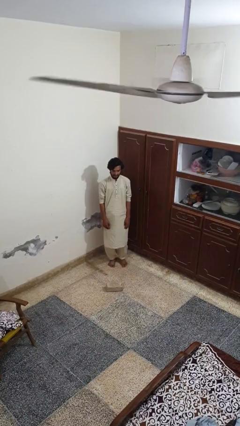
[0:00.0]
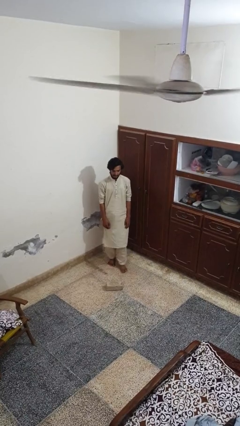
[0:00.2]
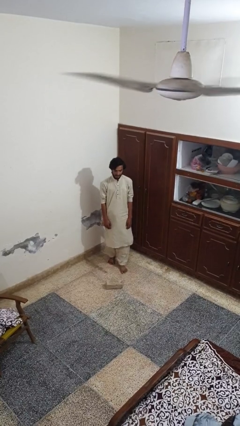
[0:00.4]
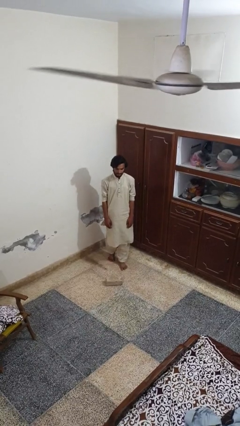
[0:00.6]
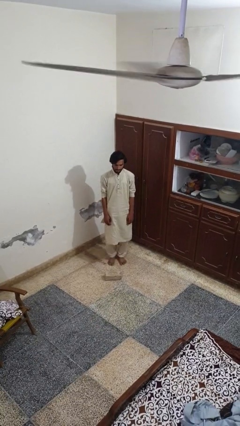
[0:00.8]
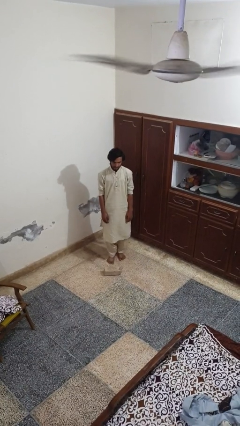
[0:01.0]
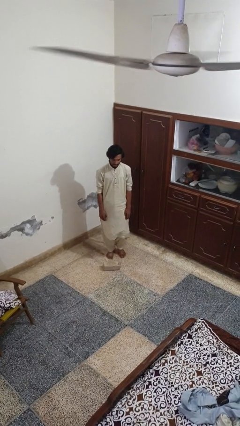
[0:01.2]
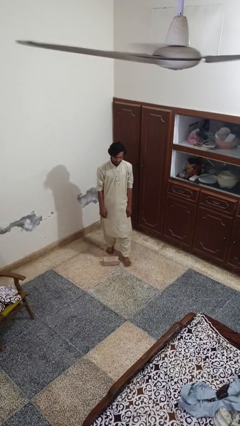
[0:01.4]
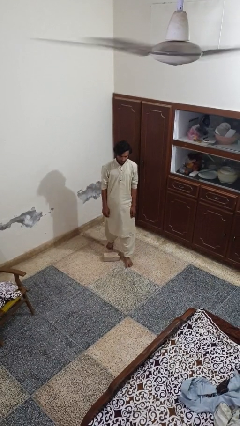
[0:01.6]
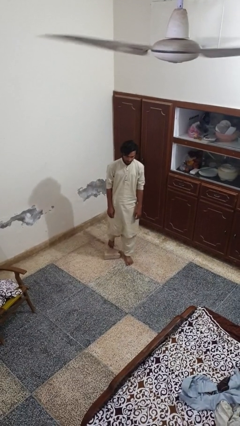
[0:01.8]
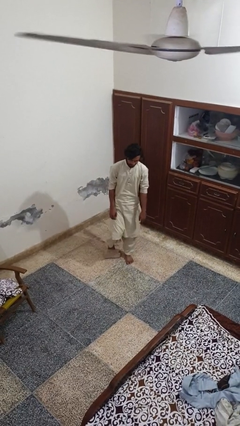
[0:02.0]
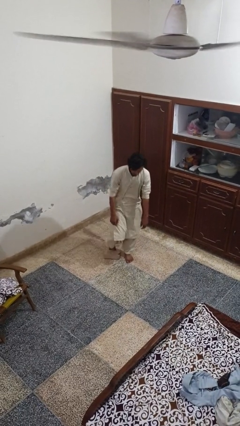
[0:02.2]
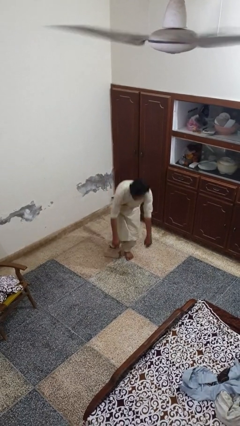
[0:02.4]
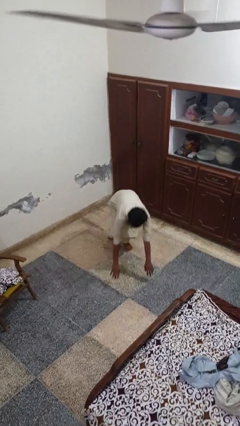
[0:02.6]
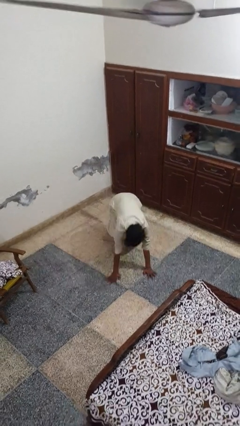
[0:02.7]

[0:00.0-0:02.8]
person trips on object on floor

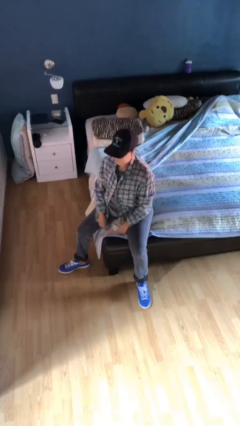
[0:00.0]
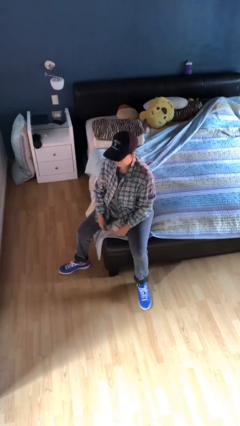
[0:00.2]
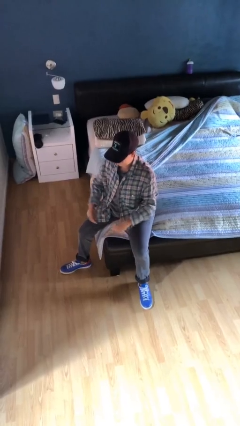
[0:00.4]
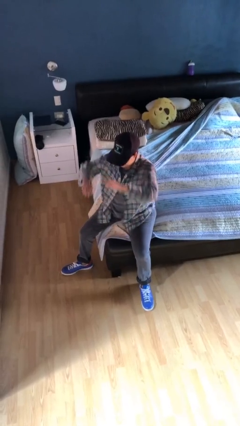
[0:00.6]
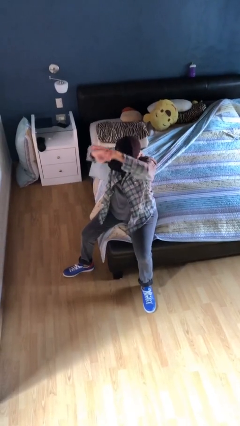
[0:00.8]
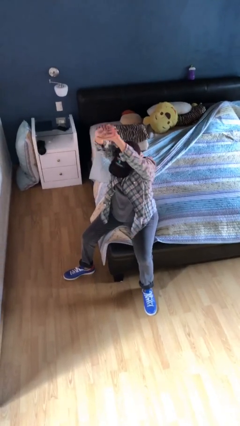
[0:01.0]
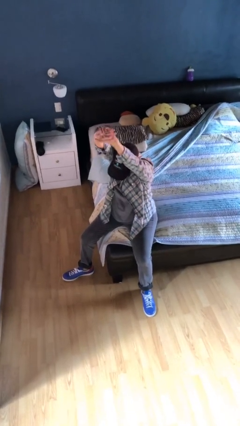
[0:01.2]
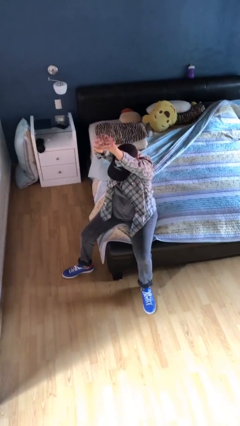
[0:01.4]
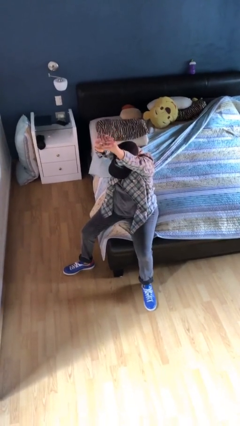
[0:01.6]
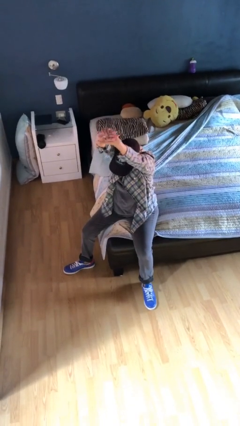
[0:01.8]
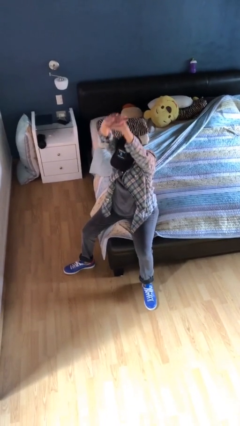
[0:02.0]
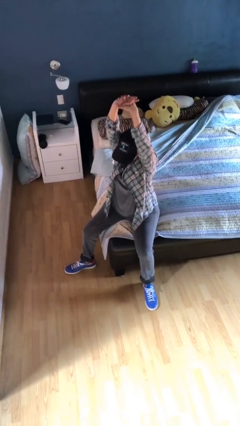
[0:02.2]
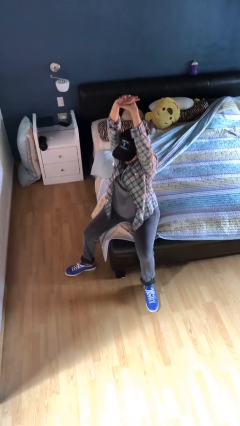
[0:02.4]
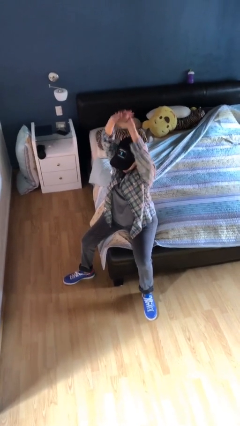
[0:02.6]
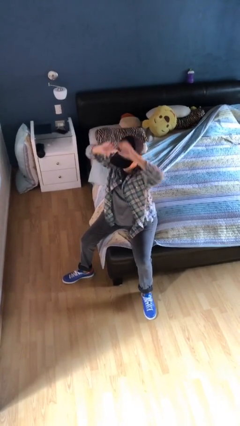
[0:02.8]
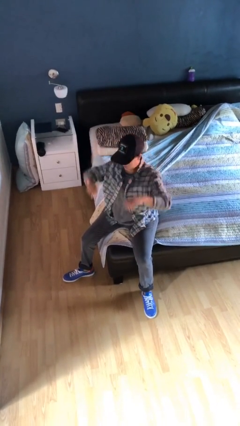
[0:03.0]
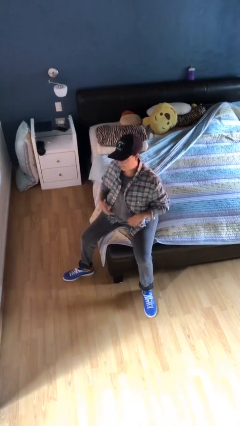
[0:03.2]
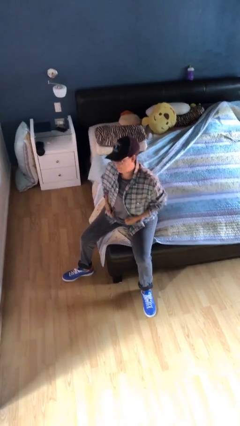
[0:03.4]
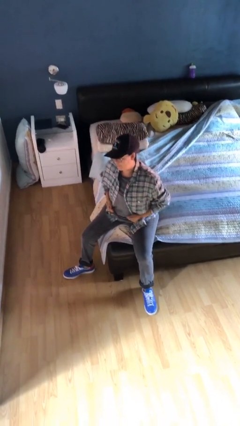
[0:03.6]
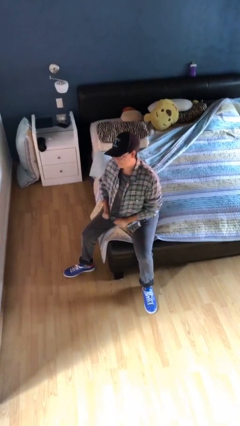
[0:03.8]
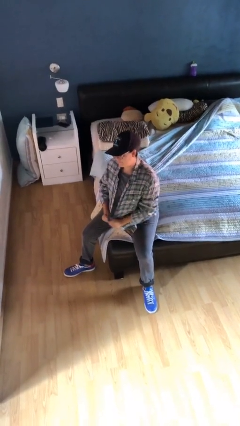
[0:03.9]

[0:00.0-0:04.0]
person stretches arms over head

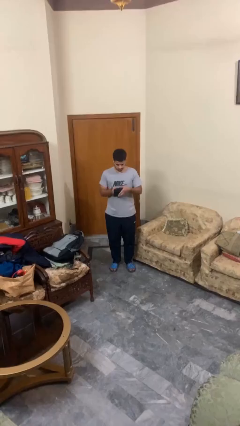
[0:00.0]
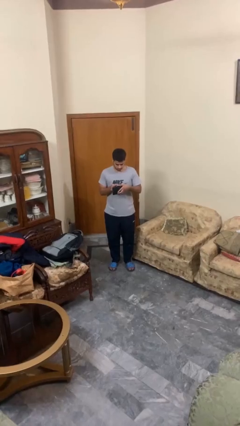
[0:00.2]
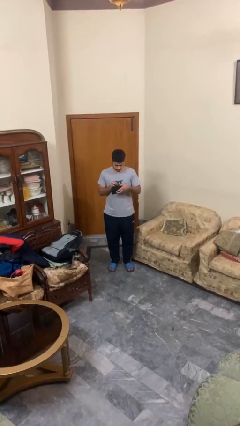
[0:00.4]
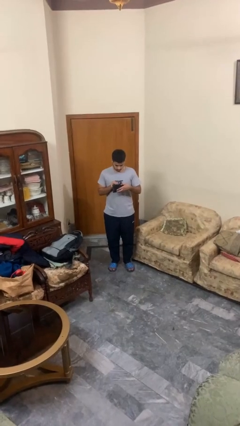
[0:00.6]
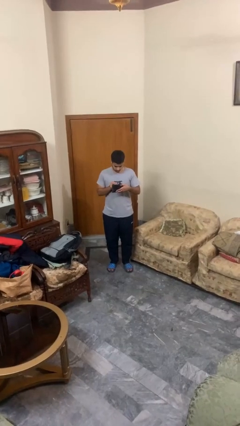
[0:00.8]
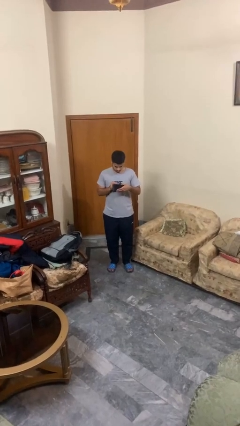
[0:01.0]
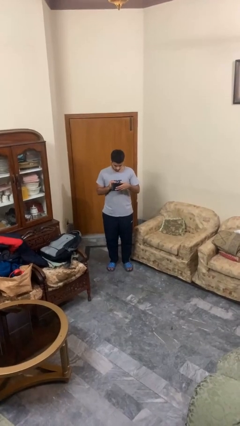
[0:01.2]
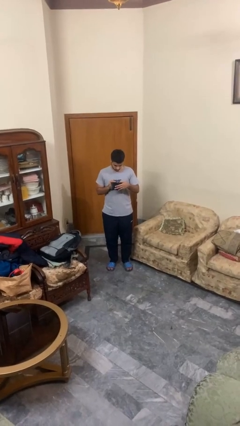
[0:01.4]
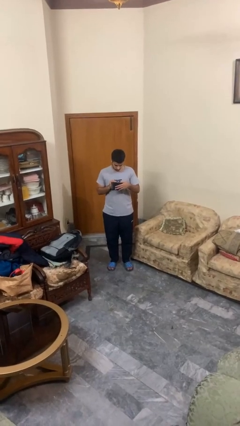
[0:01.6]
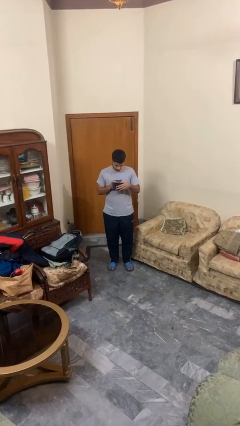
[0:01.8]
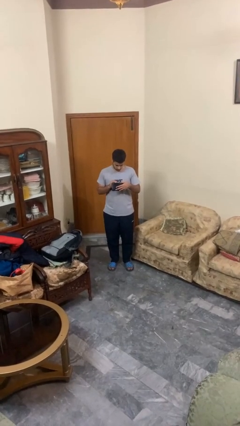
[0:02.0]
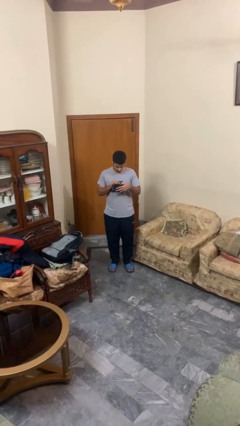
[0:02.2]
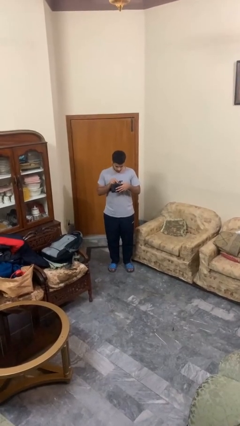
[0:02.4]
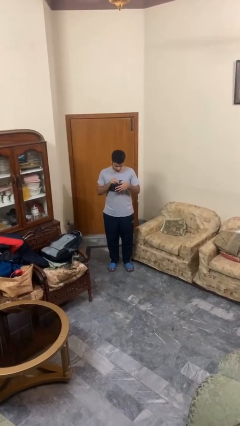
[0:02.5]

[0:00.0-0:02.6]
person searches in purse

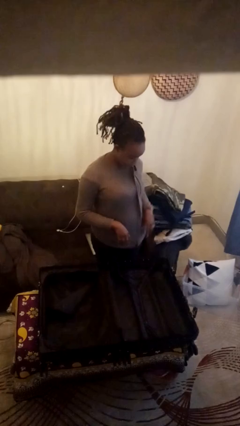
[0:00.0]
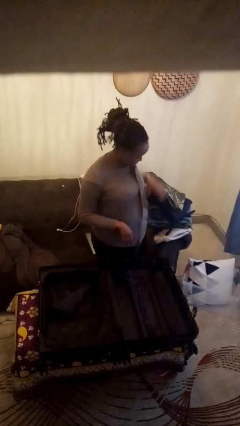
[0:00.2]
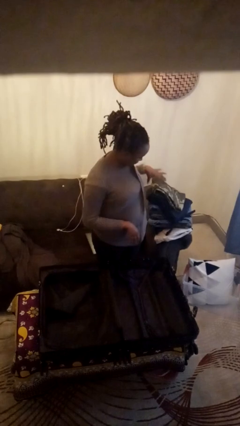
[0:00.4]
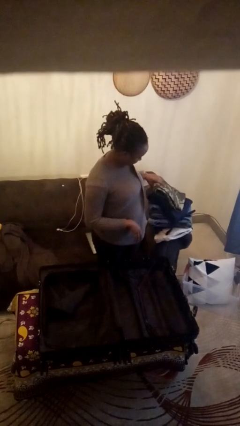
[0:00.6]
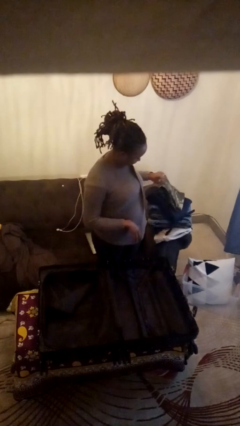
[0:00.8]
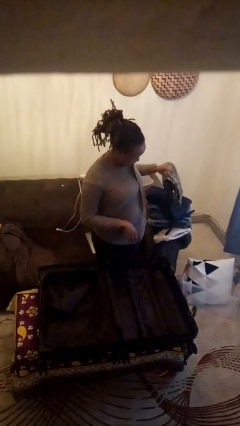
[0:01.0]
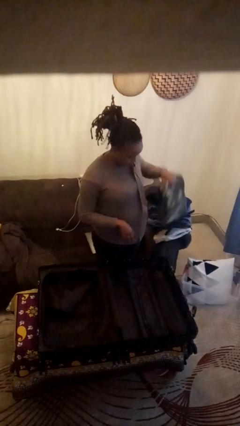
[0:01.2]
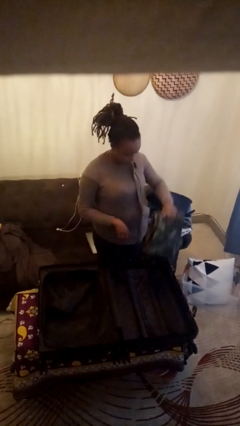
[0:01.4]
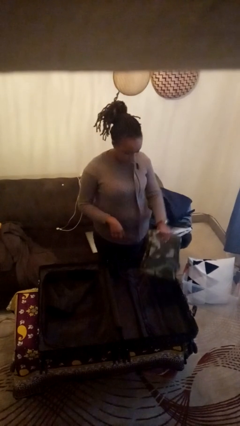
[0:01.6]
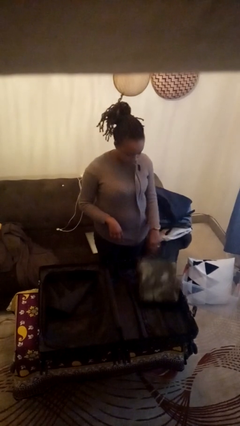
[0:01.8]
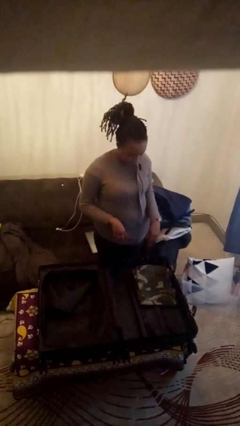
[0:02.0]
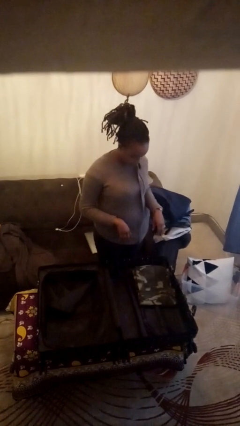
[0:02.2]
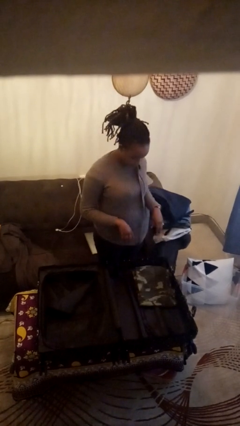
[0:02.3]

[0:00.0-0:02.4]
person loads clothes into suitcase

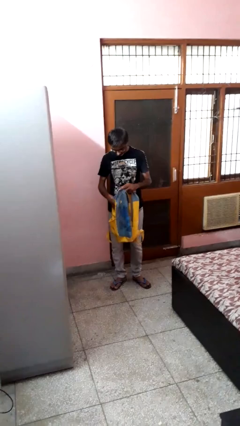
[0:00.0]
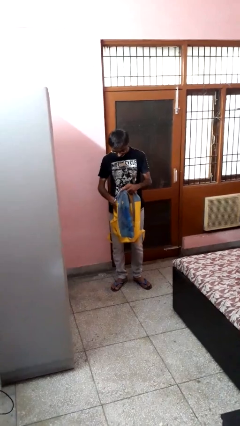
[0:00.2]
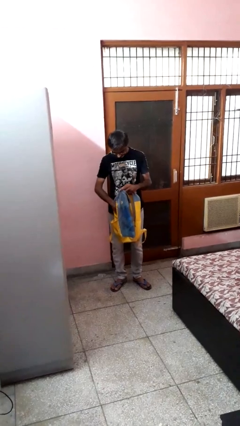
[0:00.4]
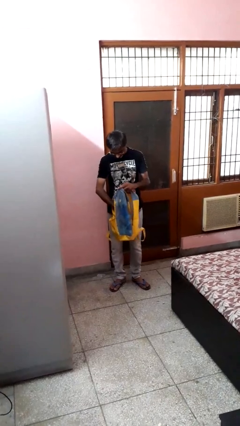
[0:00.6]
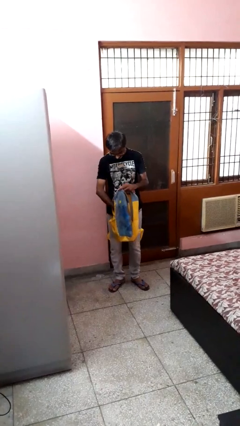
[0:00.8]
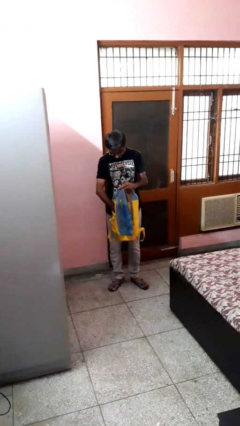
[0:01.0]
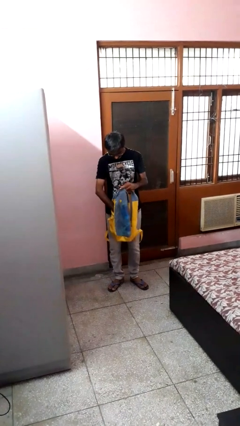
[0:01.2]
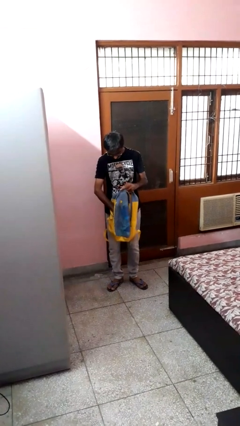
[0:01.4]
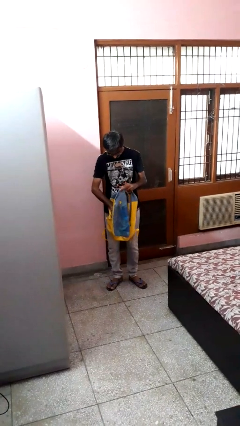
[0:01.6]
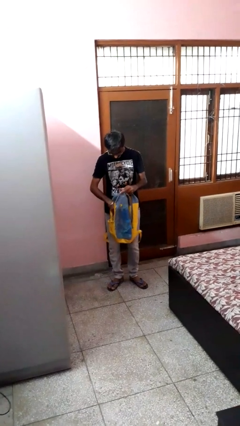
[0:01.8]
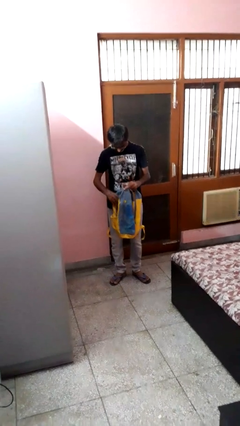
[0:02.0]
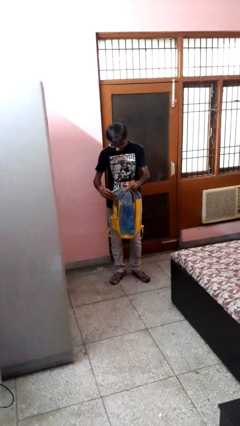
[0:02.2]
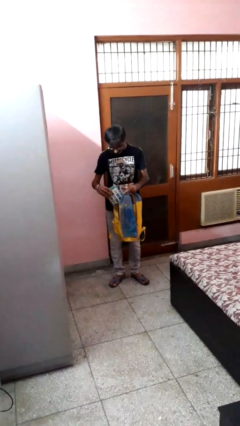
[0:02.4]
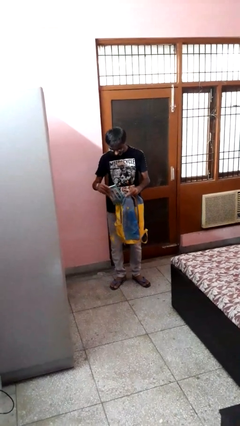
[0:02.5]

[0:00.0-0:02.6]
person searches in backpack

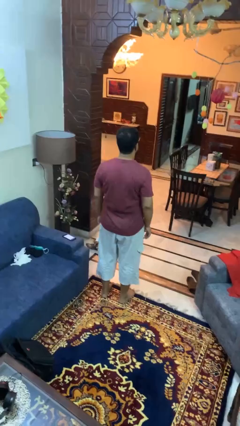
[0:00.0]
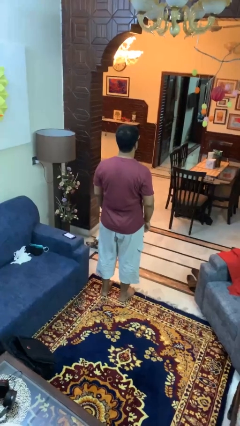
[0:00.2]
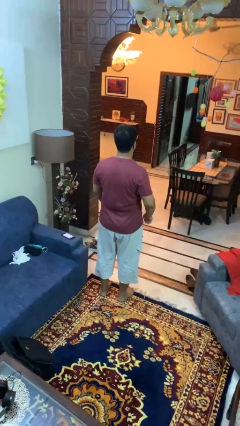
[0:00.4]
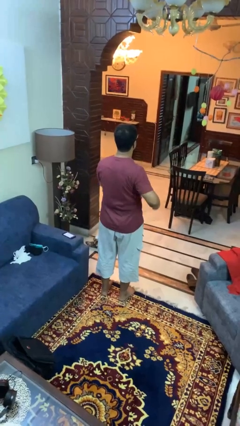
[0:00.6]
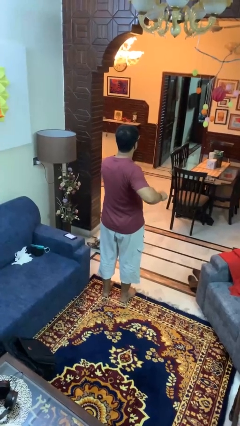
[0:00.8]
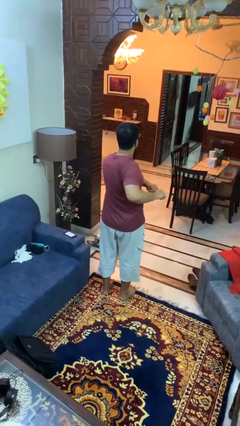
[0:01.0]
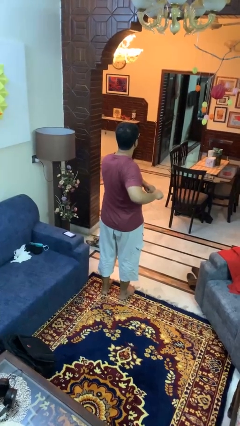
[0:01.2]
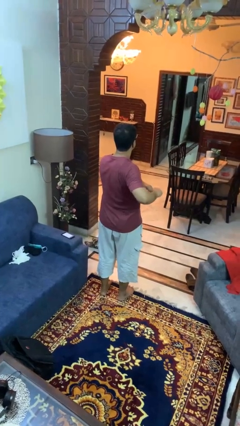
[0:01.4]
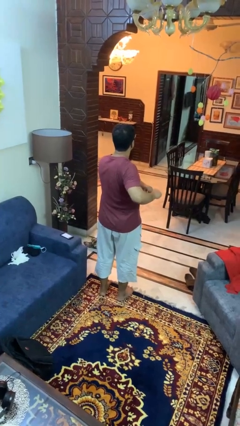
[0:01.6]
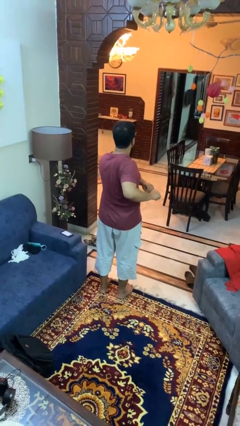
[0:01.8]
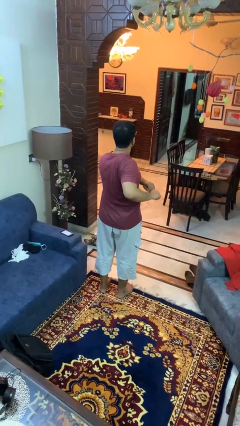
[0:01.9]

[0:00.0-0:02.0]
person stretches arms to side

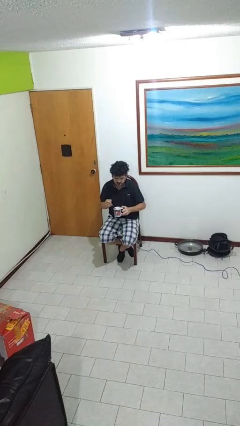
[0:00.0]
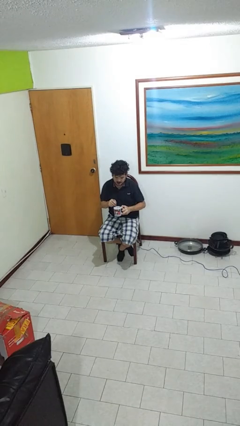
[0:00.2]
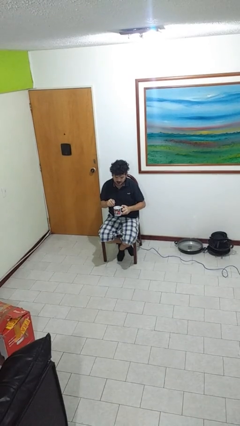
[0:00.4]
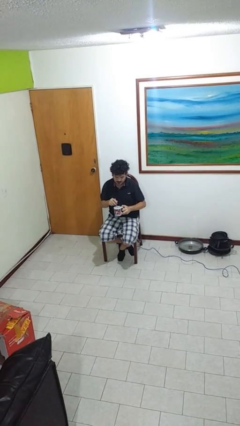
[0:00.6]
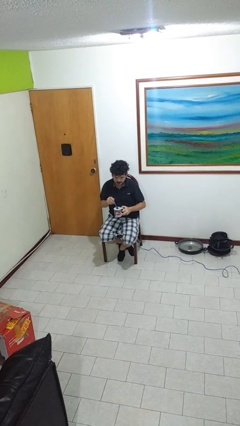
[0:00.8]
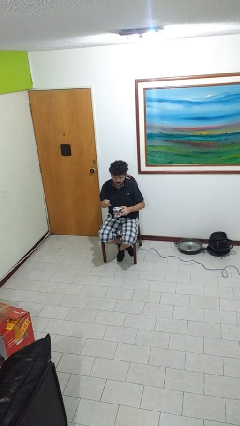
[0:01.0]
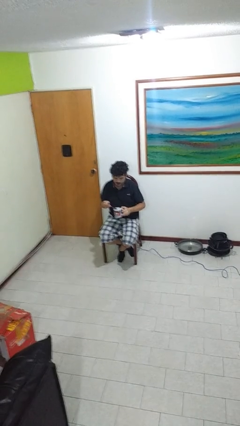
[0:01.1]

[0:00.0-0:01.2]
person stirs mug
